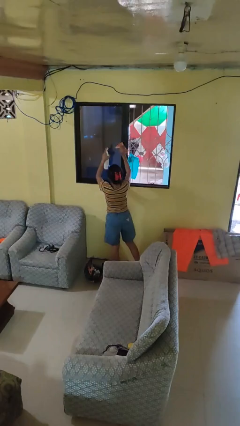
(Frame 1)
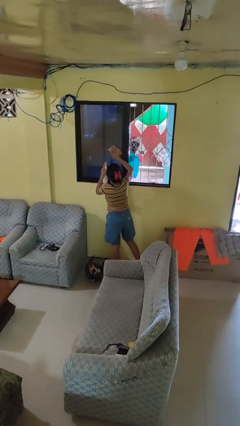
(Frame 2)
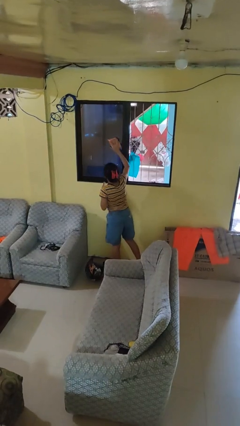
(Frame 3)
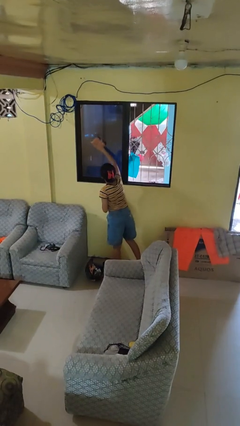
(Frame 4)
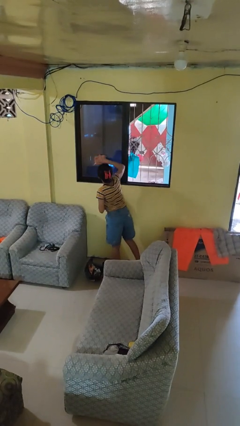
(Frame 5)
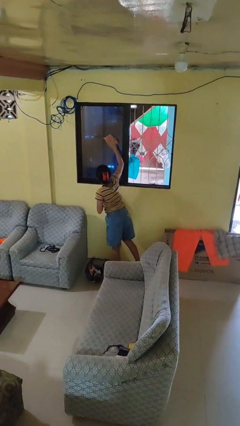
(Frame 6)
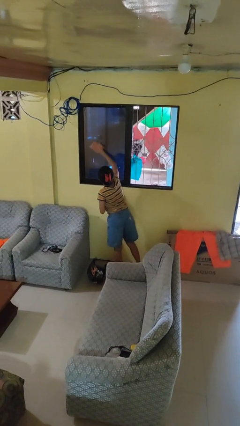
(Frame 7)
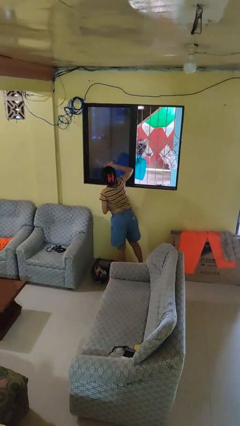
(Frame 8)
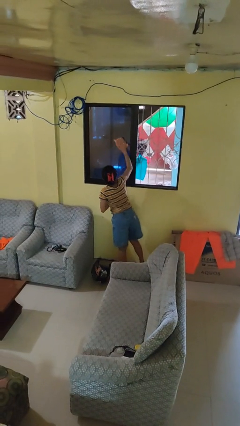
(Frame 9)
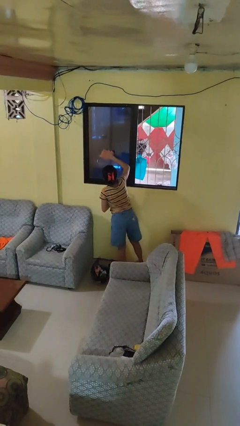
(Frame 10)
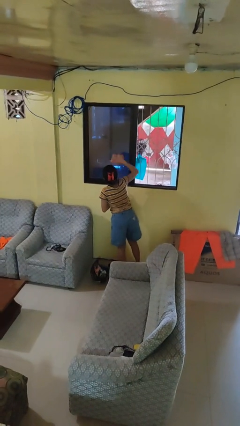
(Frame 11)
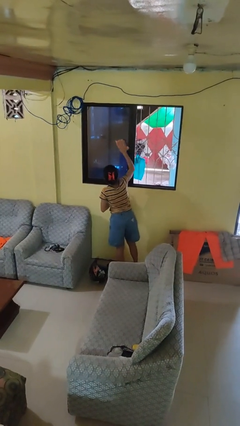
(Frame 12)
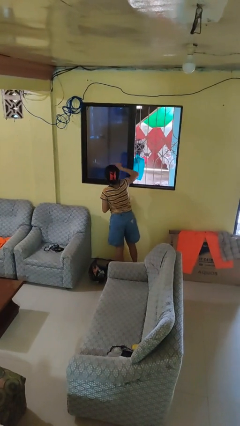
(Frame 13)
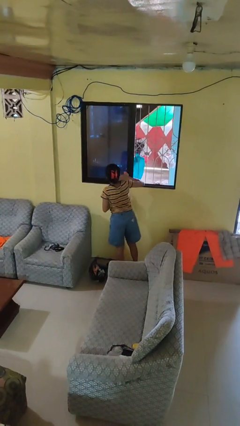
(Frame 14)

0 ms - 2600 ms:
person washes window

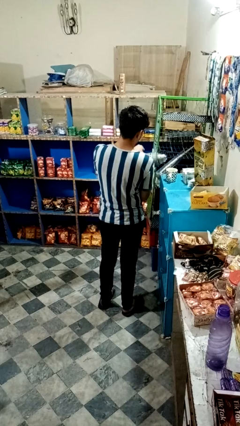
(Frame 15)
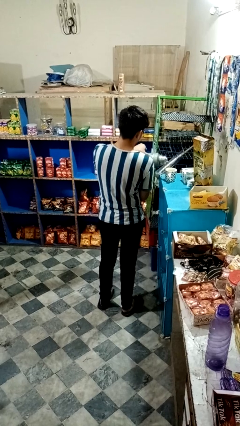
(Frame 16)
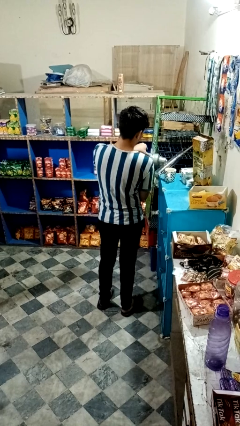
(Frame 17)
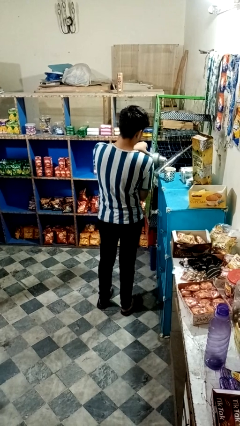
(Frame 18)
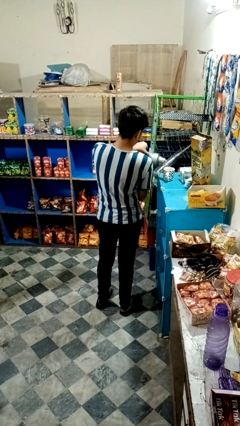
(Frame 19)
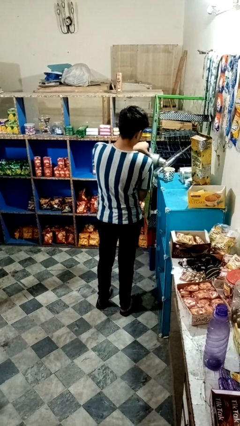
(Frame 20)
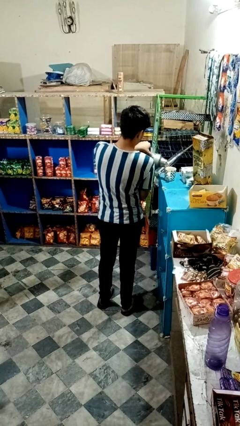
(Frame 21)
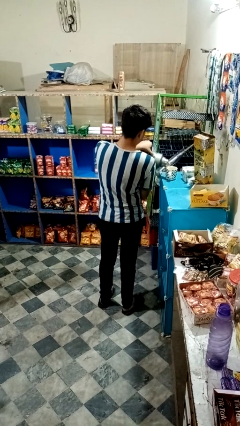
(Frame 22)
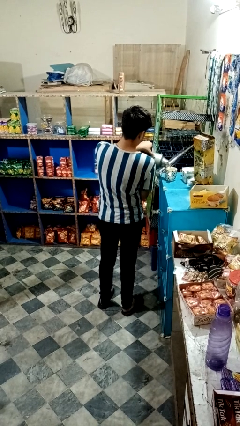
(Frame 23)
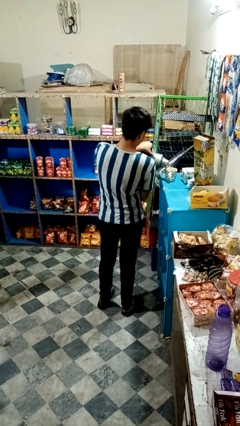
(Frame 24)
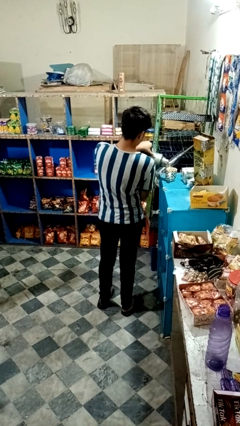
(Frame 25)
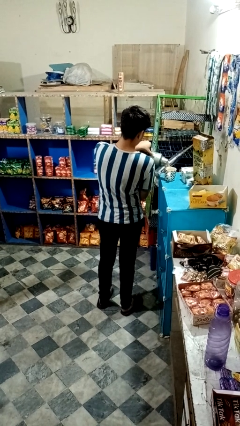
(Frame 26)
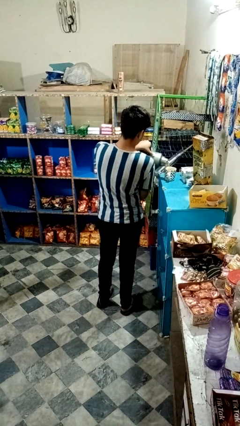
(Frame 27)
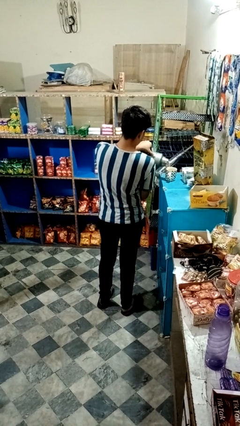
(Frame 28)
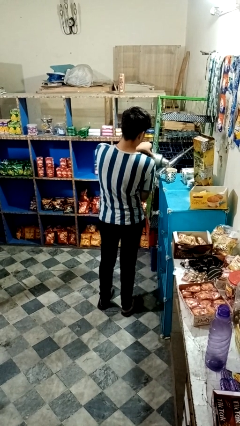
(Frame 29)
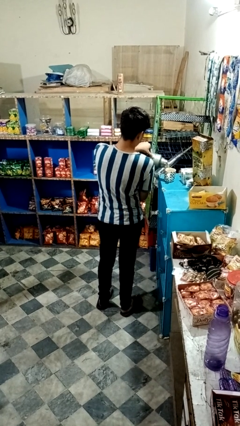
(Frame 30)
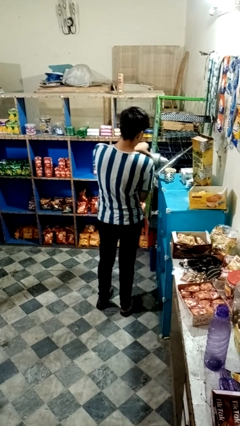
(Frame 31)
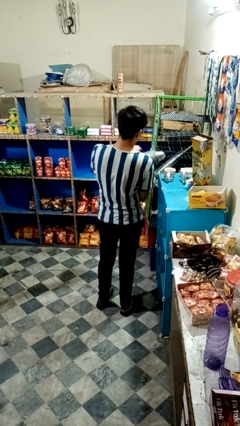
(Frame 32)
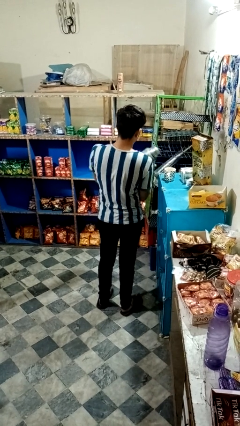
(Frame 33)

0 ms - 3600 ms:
person pours coffee into mug

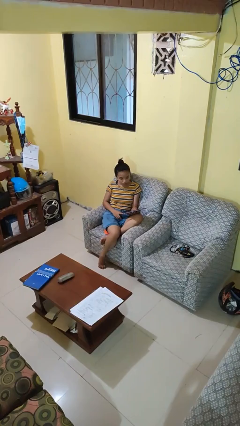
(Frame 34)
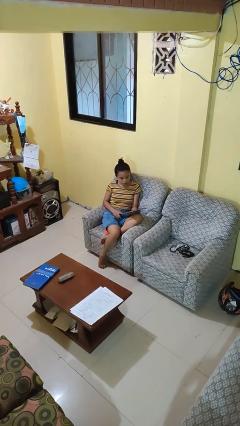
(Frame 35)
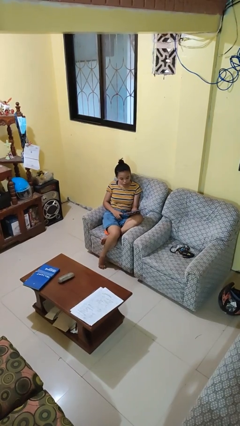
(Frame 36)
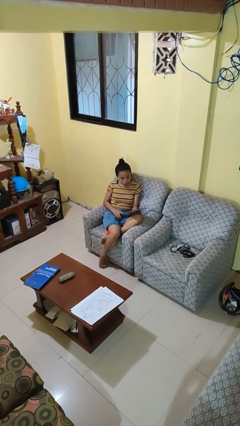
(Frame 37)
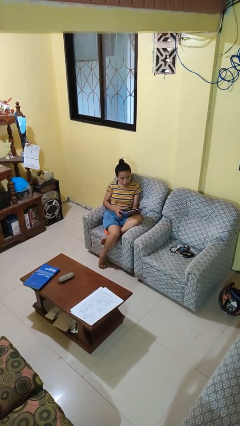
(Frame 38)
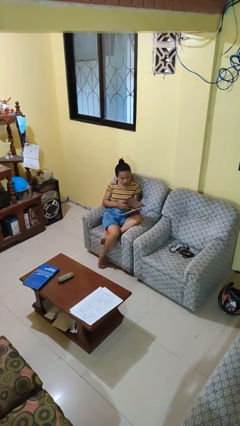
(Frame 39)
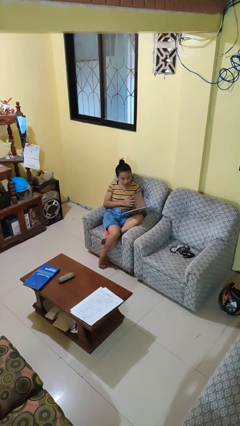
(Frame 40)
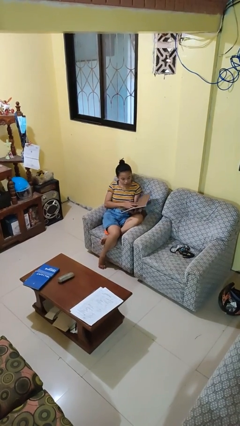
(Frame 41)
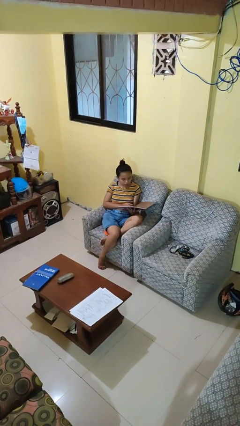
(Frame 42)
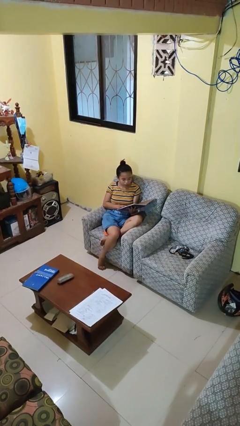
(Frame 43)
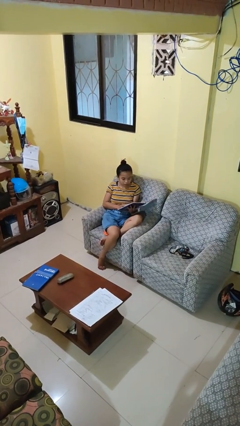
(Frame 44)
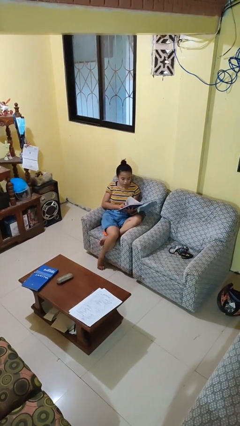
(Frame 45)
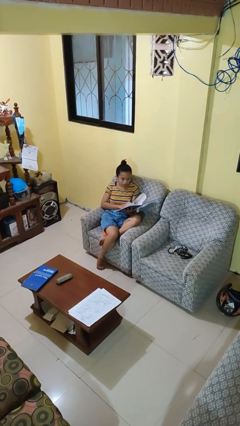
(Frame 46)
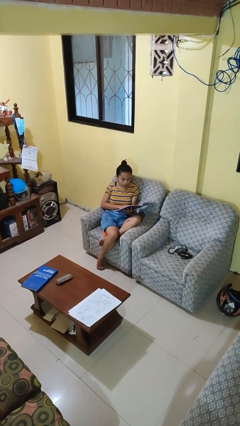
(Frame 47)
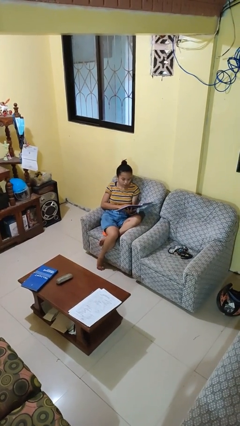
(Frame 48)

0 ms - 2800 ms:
person reads book

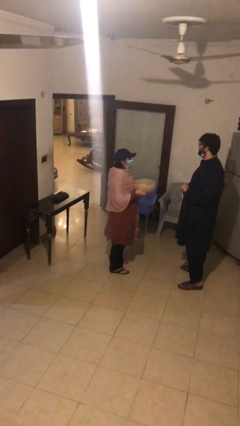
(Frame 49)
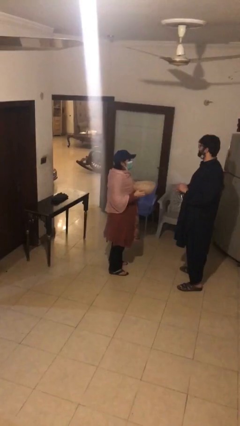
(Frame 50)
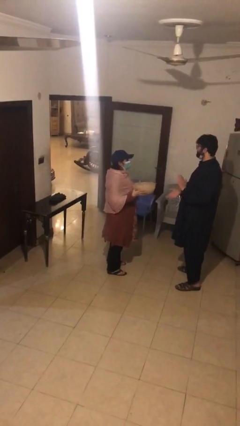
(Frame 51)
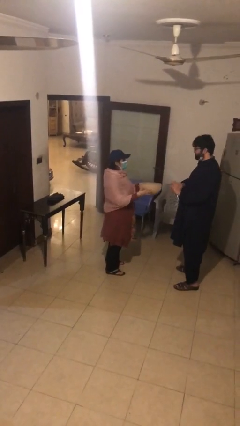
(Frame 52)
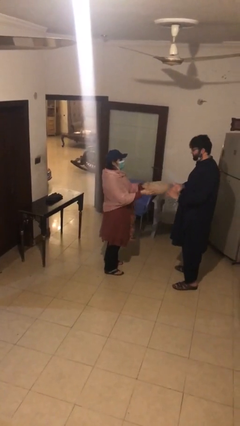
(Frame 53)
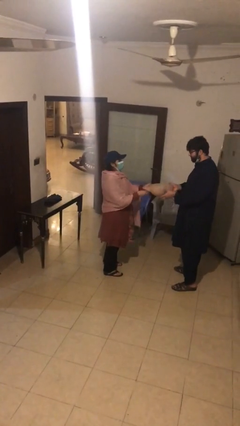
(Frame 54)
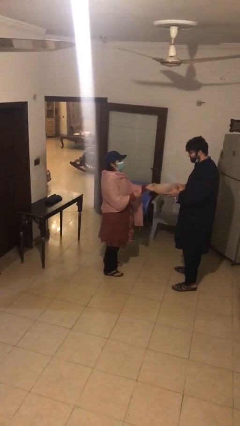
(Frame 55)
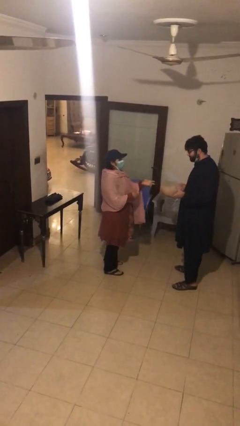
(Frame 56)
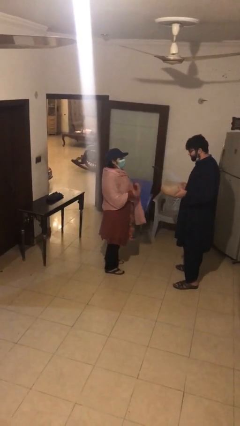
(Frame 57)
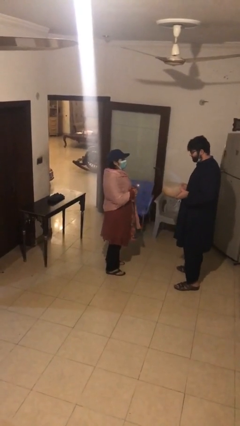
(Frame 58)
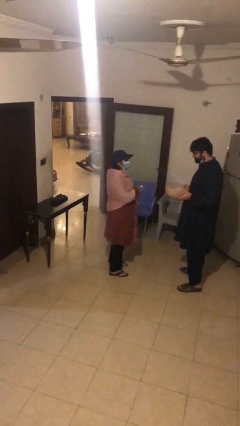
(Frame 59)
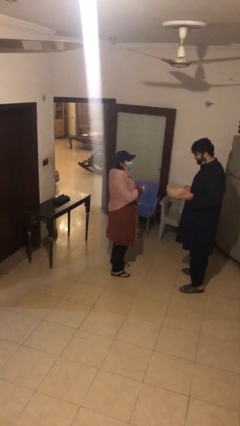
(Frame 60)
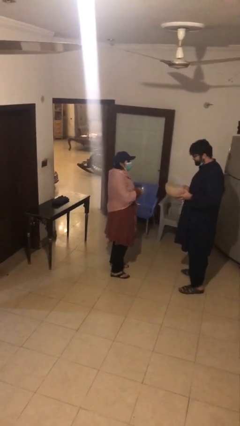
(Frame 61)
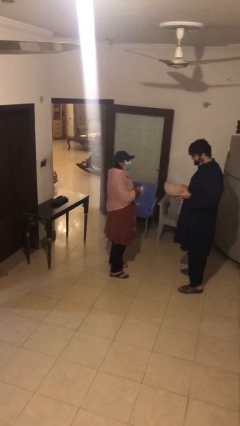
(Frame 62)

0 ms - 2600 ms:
person transfers object to person

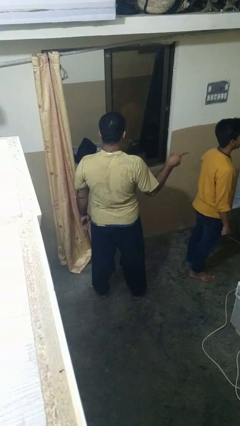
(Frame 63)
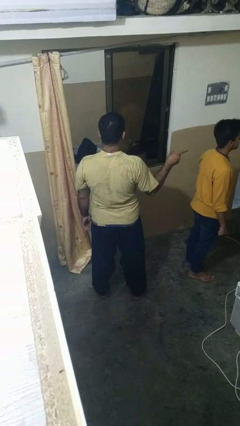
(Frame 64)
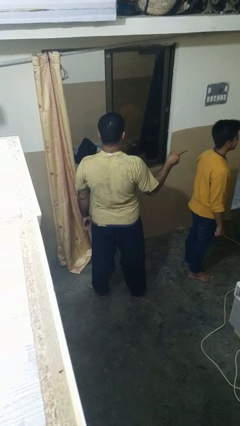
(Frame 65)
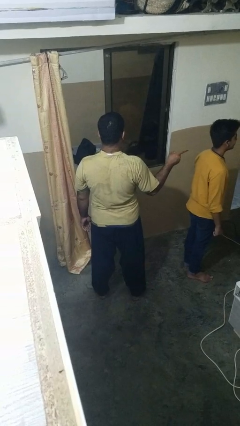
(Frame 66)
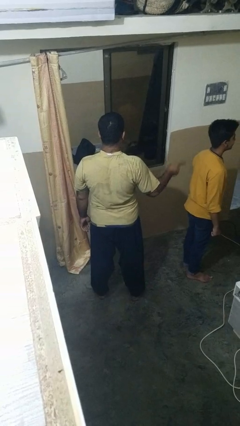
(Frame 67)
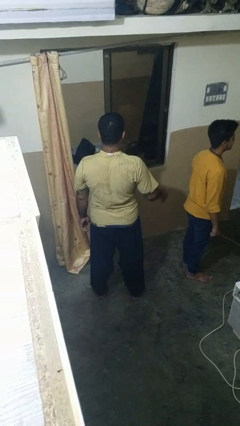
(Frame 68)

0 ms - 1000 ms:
person points at person

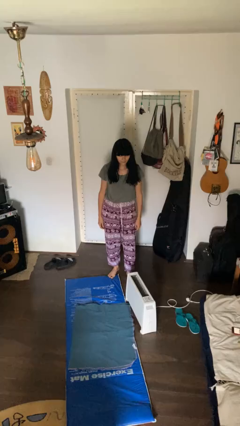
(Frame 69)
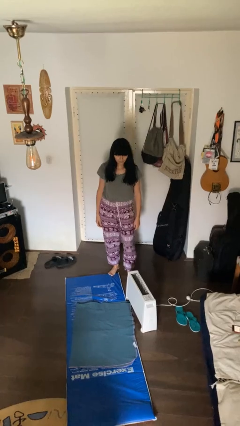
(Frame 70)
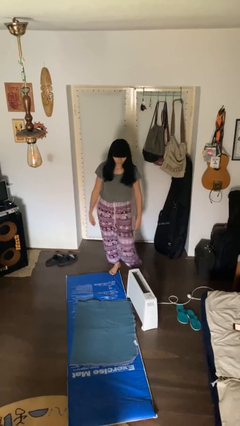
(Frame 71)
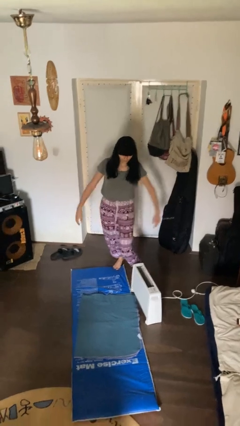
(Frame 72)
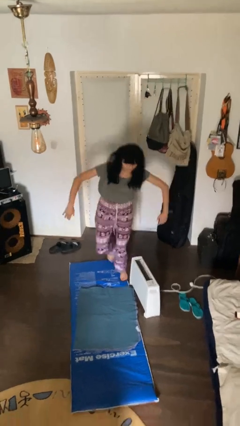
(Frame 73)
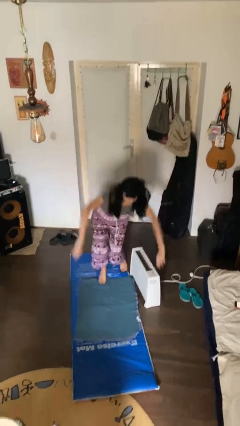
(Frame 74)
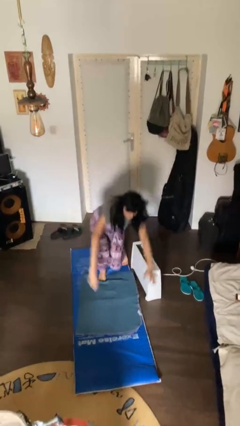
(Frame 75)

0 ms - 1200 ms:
person trips on object on floor

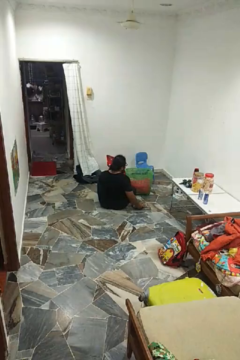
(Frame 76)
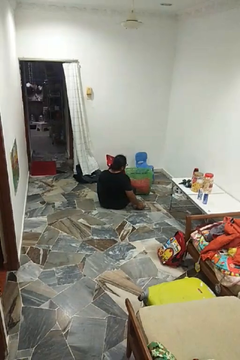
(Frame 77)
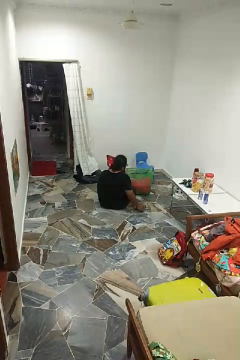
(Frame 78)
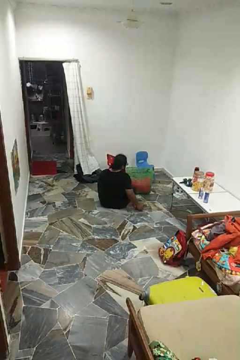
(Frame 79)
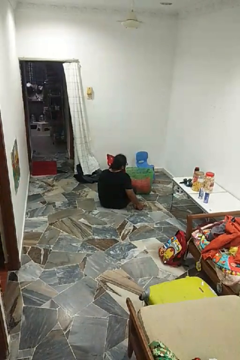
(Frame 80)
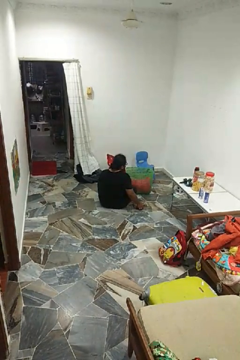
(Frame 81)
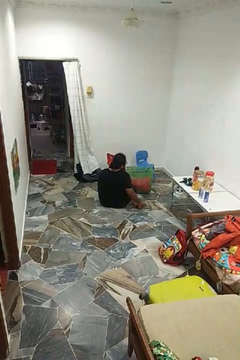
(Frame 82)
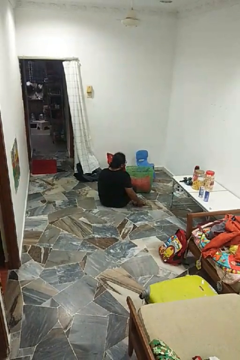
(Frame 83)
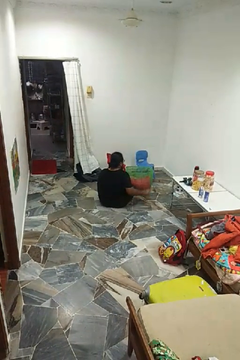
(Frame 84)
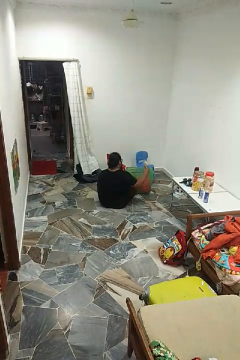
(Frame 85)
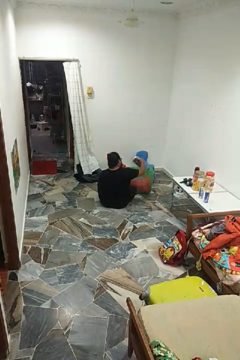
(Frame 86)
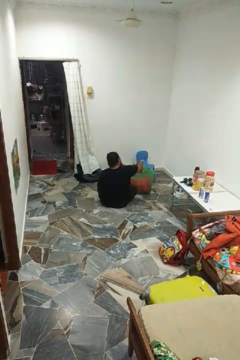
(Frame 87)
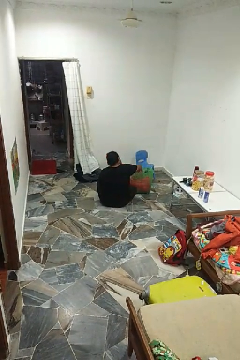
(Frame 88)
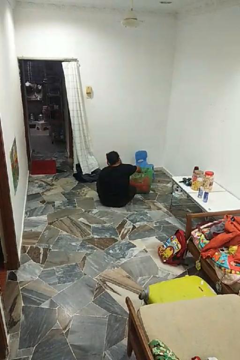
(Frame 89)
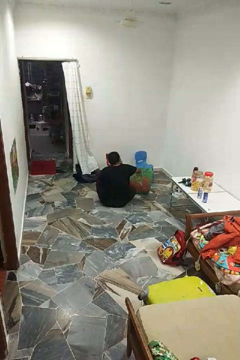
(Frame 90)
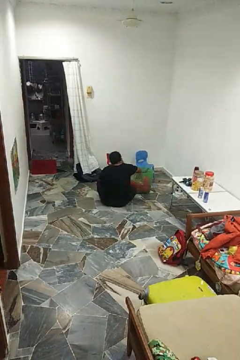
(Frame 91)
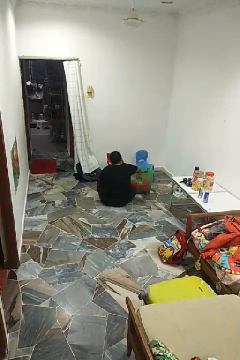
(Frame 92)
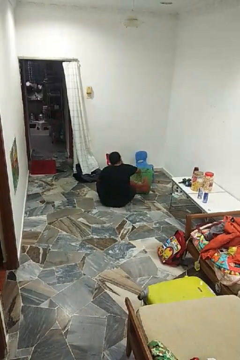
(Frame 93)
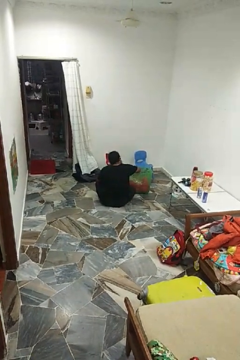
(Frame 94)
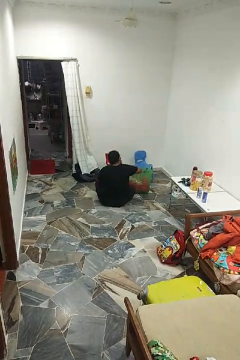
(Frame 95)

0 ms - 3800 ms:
person puts object into basket

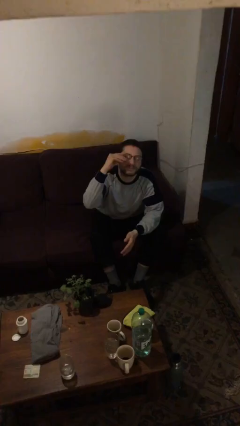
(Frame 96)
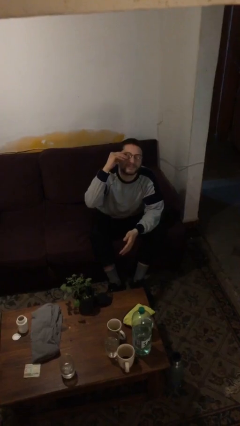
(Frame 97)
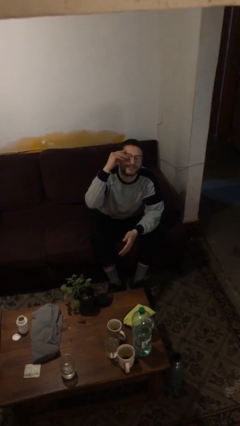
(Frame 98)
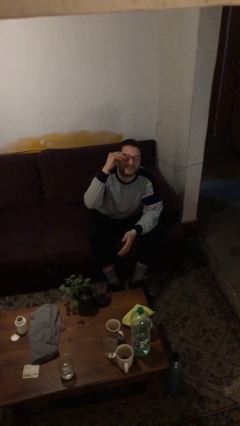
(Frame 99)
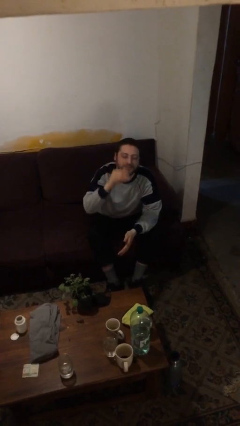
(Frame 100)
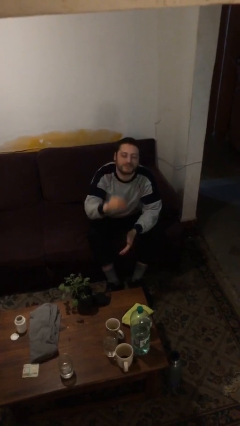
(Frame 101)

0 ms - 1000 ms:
person takes off glasses
